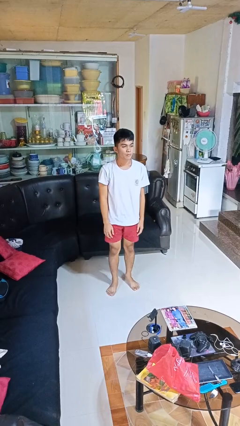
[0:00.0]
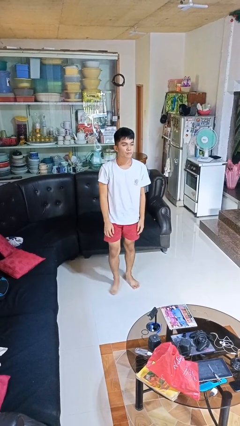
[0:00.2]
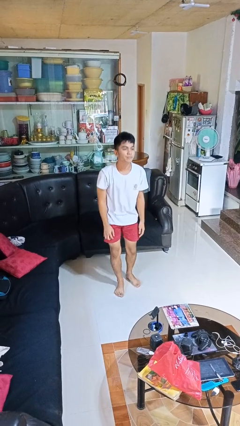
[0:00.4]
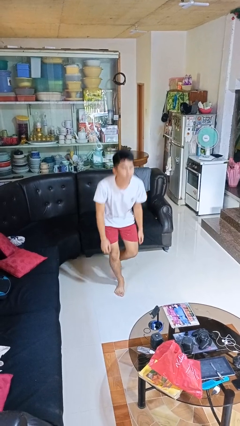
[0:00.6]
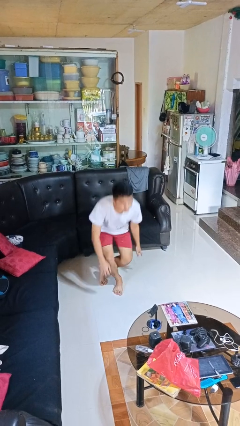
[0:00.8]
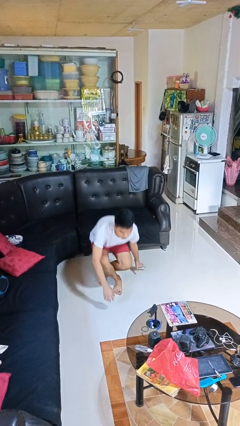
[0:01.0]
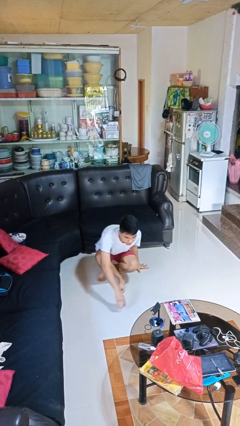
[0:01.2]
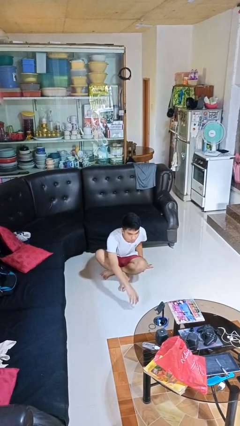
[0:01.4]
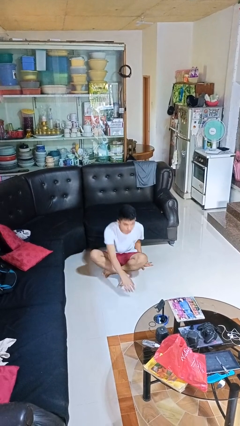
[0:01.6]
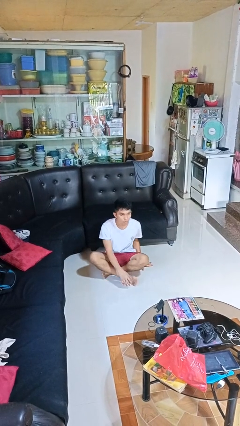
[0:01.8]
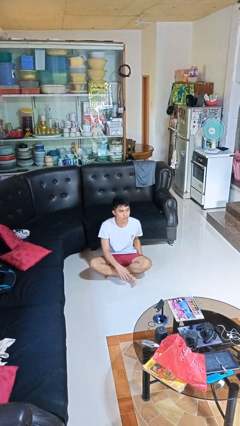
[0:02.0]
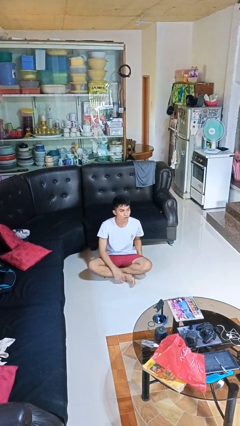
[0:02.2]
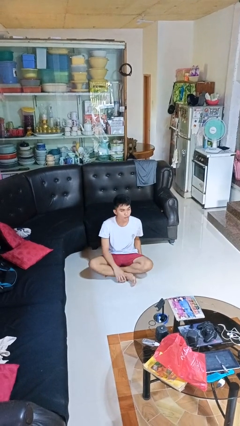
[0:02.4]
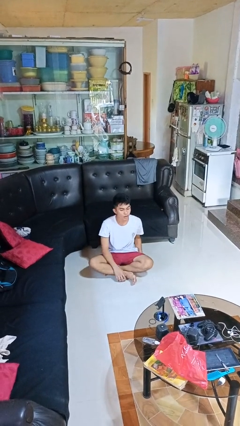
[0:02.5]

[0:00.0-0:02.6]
person sits crisscross

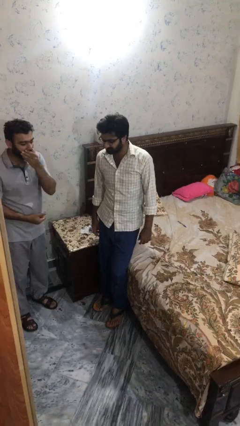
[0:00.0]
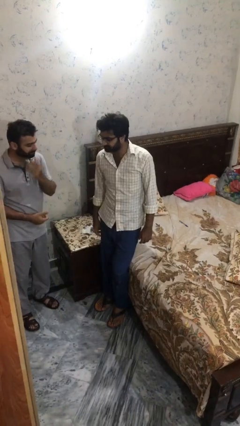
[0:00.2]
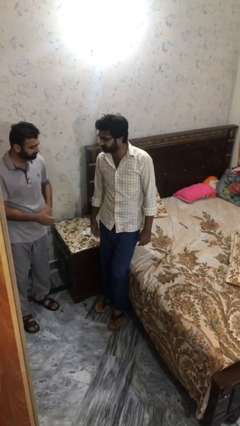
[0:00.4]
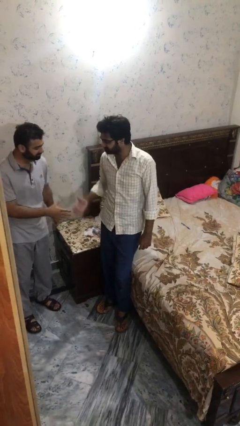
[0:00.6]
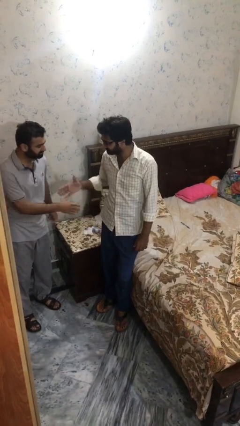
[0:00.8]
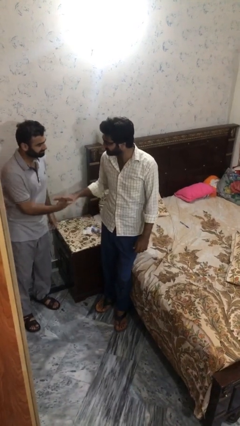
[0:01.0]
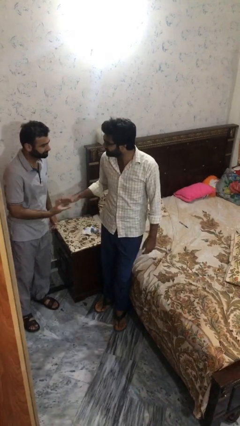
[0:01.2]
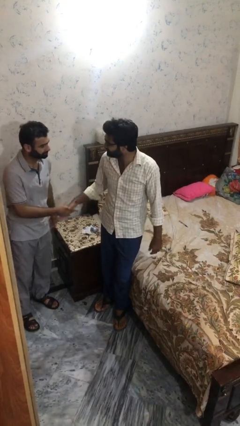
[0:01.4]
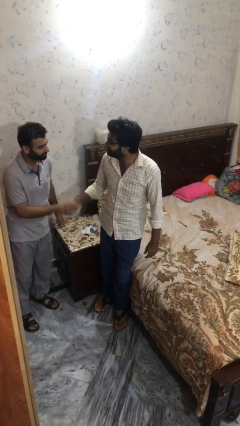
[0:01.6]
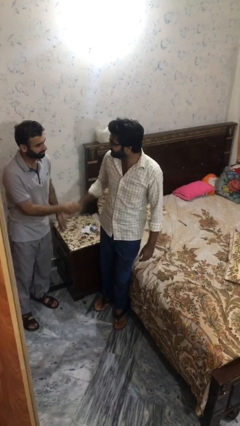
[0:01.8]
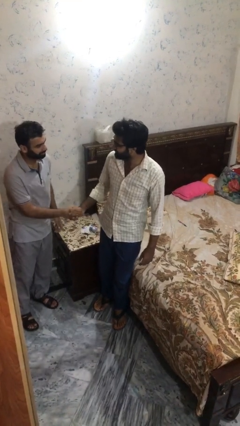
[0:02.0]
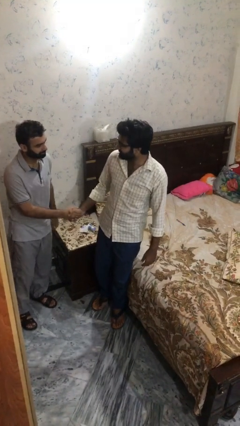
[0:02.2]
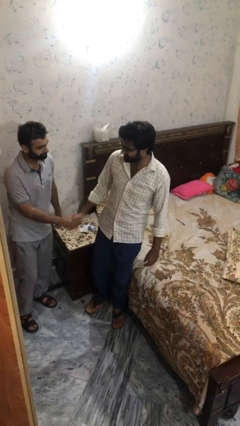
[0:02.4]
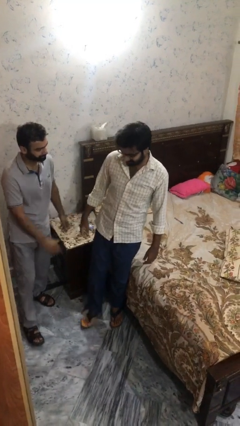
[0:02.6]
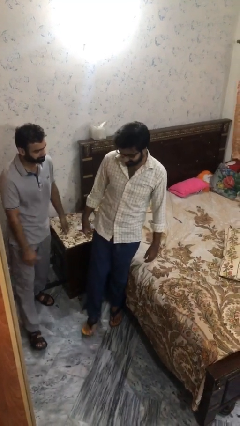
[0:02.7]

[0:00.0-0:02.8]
person shakes hand

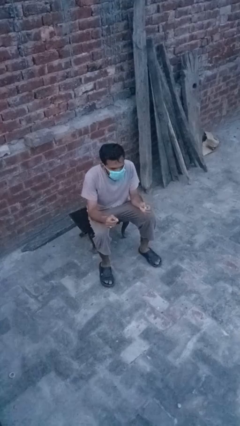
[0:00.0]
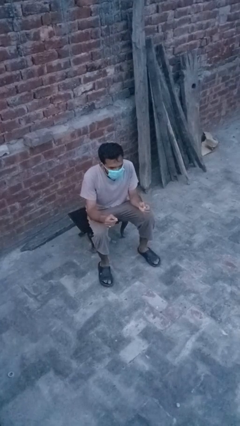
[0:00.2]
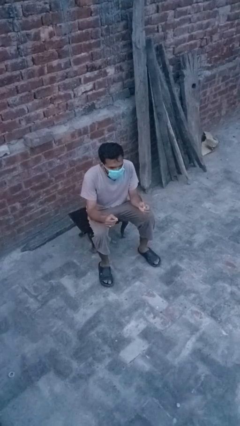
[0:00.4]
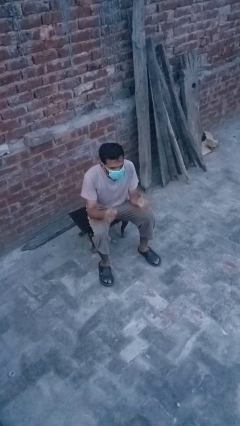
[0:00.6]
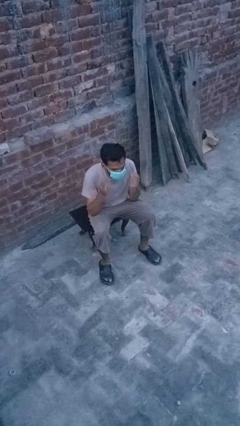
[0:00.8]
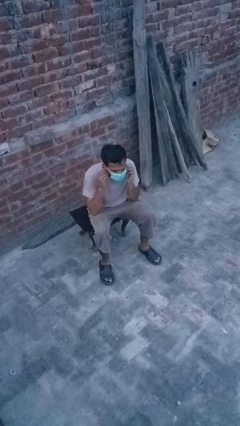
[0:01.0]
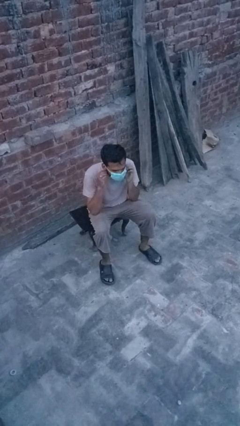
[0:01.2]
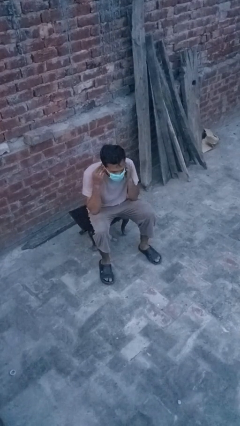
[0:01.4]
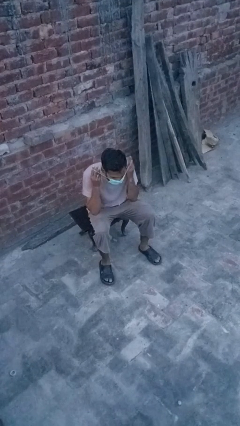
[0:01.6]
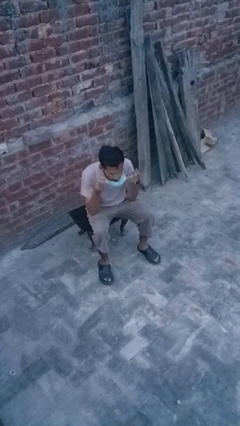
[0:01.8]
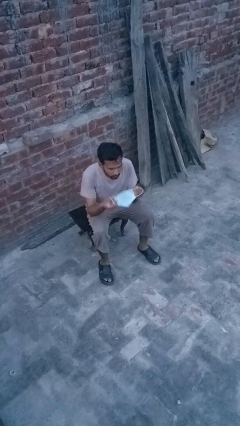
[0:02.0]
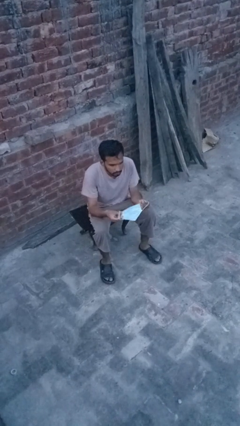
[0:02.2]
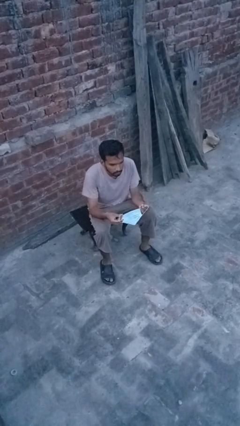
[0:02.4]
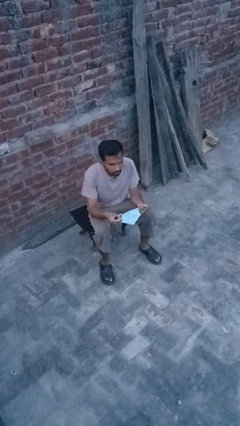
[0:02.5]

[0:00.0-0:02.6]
person takes off facemask

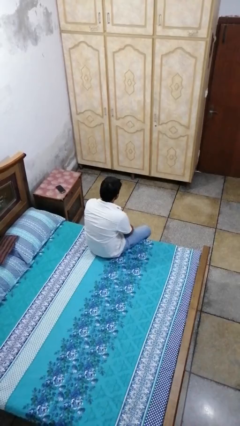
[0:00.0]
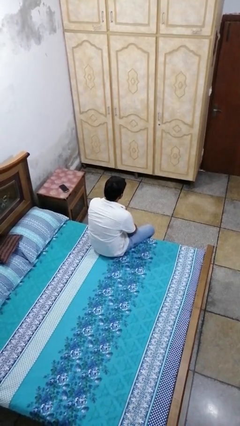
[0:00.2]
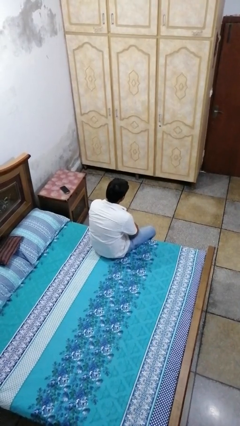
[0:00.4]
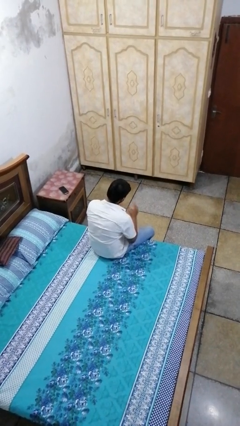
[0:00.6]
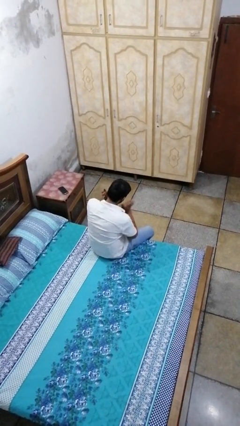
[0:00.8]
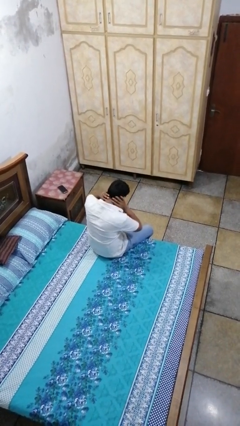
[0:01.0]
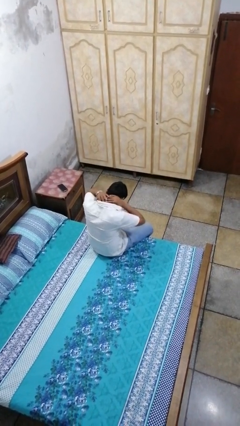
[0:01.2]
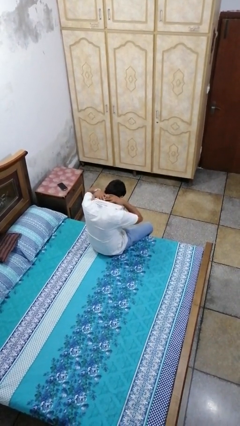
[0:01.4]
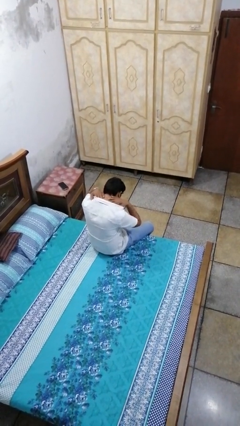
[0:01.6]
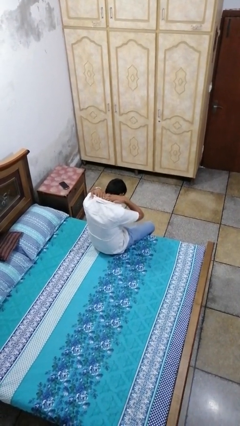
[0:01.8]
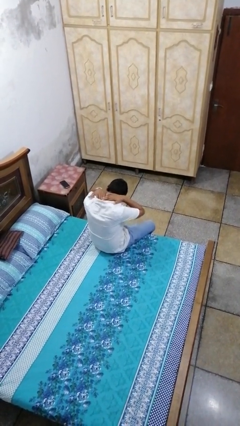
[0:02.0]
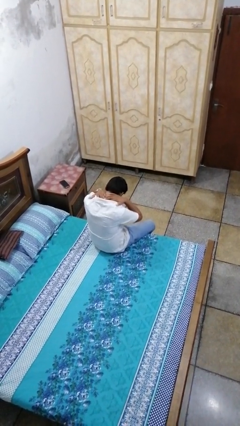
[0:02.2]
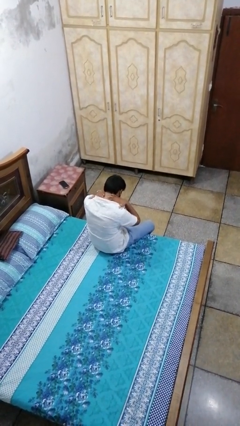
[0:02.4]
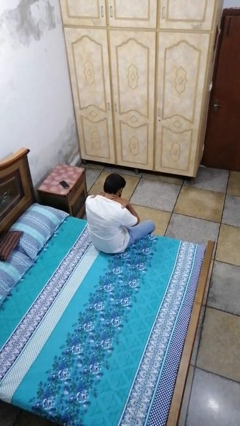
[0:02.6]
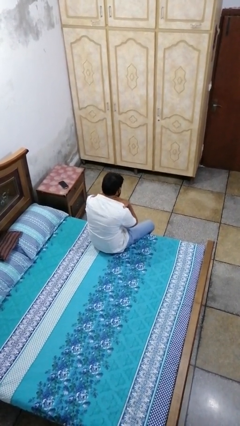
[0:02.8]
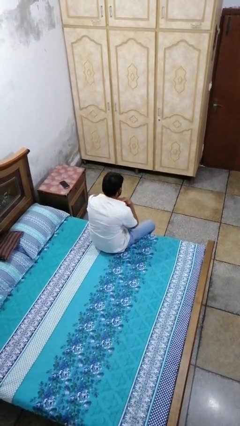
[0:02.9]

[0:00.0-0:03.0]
person rubs neck

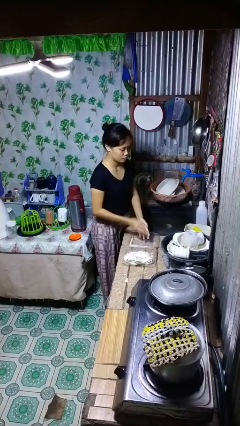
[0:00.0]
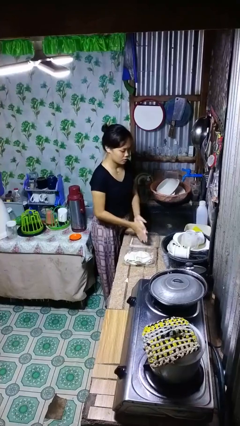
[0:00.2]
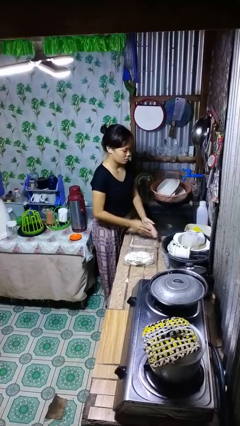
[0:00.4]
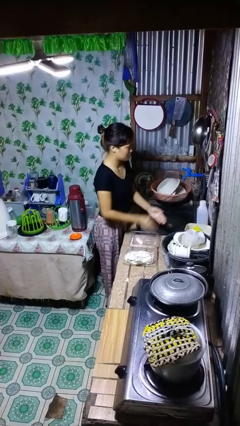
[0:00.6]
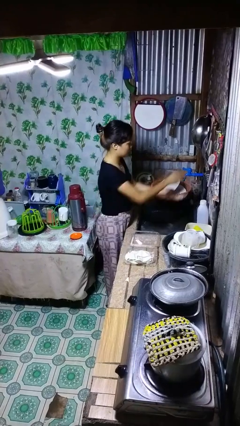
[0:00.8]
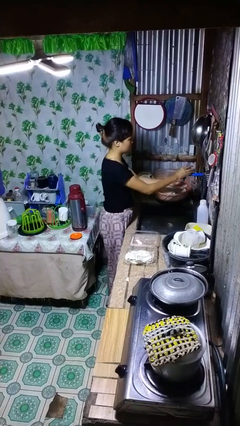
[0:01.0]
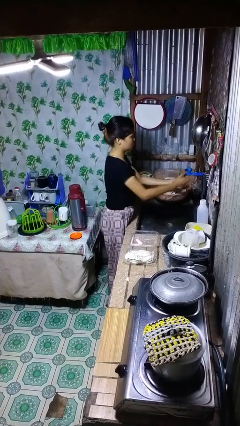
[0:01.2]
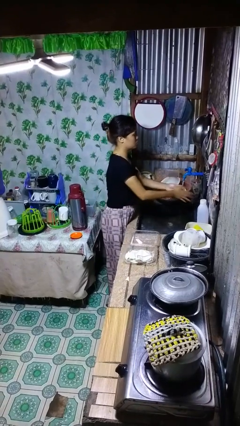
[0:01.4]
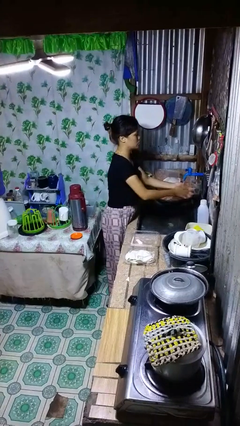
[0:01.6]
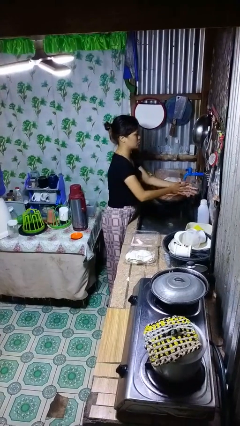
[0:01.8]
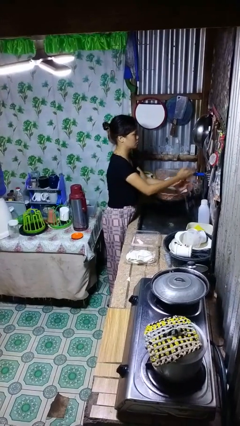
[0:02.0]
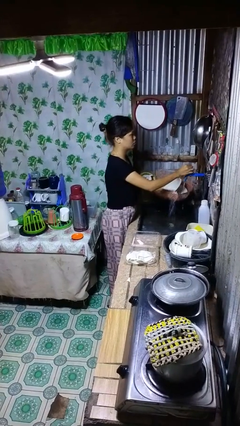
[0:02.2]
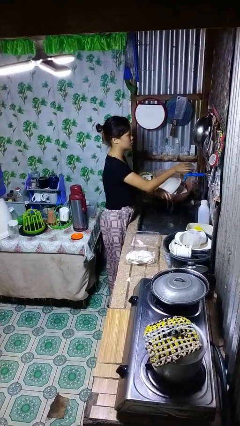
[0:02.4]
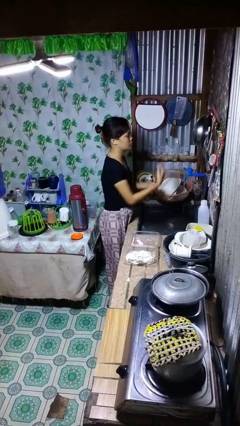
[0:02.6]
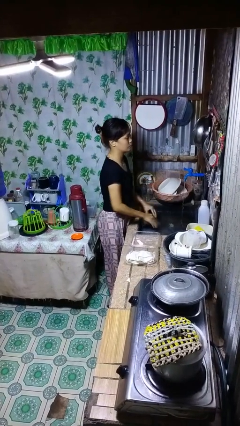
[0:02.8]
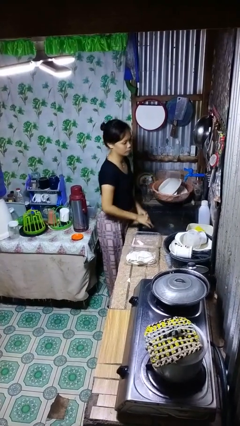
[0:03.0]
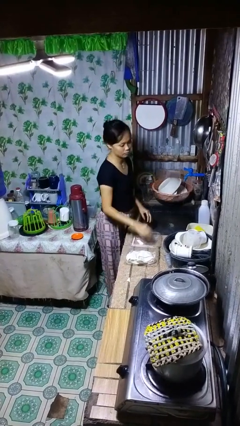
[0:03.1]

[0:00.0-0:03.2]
person washes hands

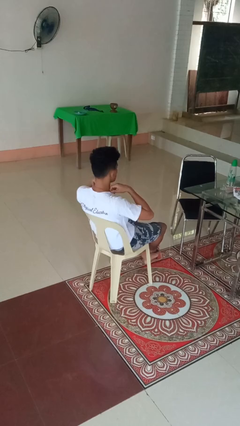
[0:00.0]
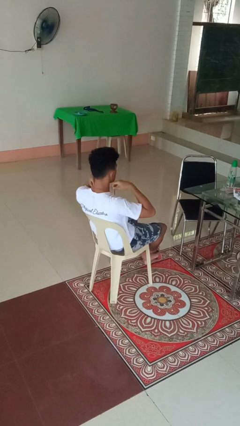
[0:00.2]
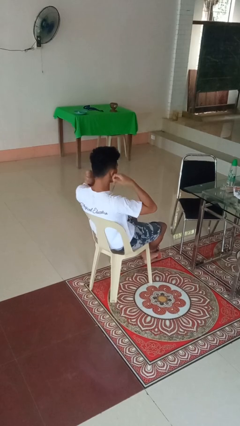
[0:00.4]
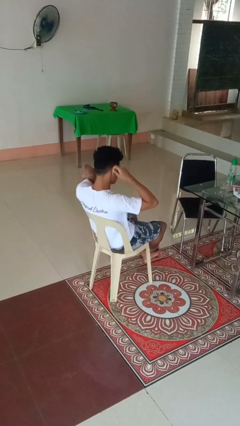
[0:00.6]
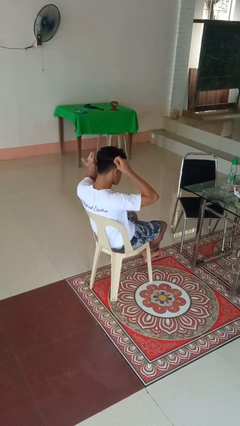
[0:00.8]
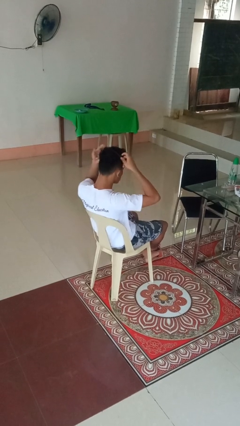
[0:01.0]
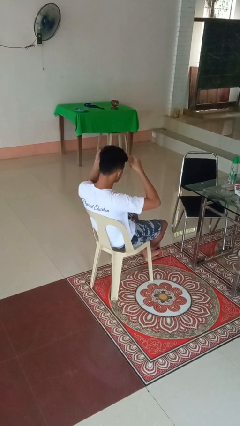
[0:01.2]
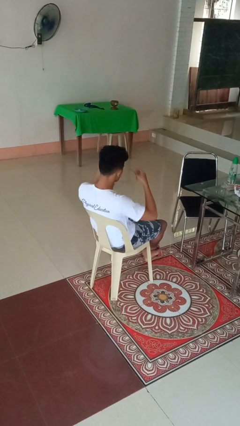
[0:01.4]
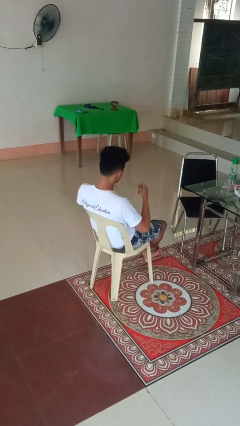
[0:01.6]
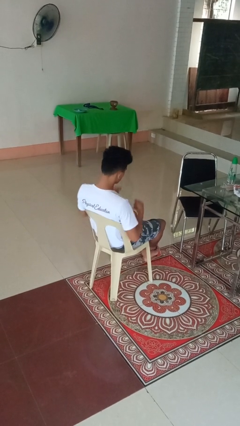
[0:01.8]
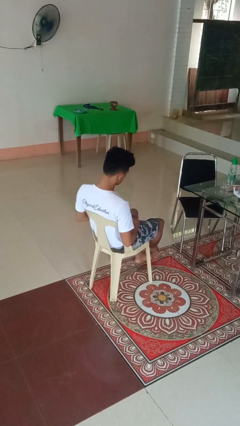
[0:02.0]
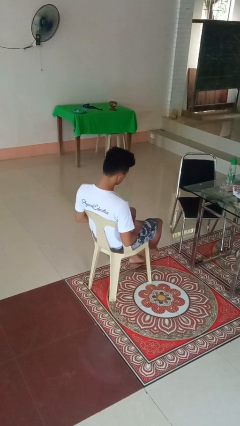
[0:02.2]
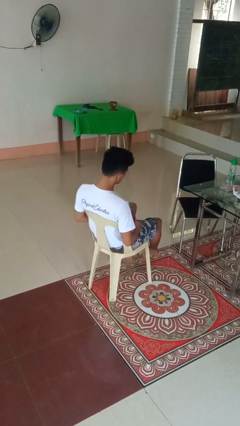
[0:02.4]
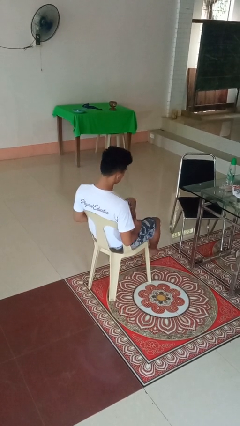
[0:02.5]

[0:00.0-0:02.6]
person takes off necklace

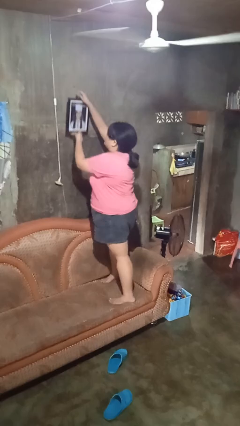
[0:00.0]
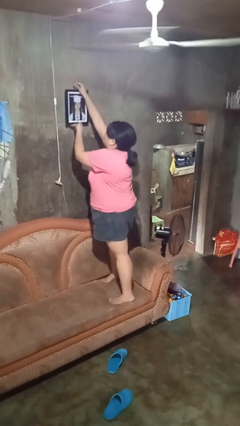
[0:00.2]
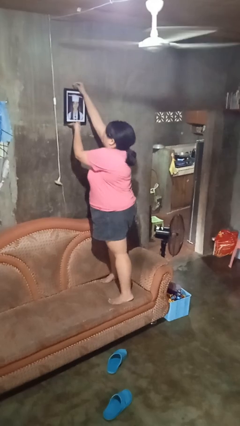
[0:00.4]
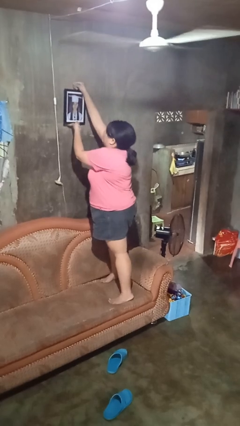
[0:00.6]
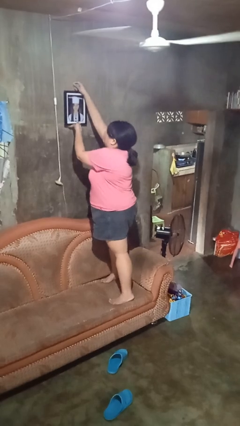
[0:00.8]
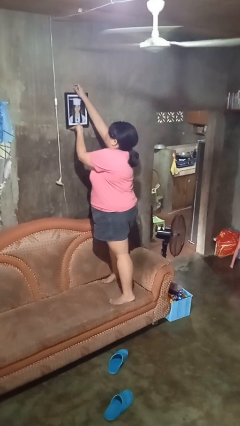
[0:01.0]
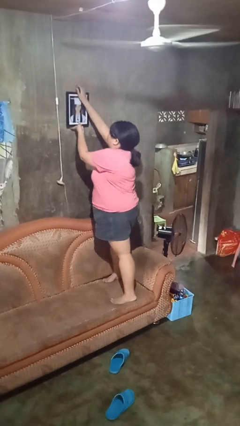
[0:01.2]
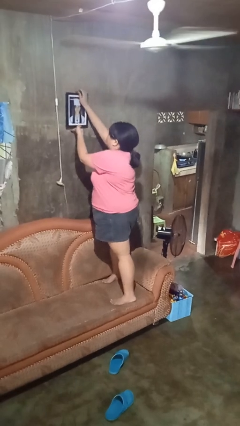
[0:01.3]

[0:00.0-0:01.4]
person puts up picture frame
